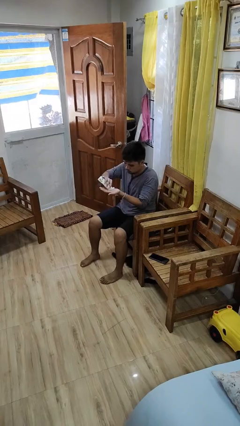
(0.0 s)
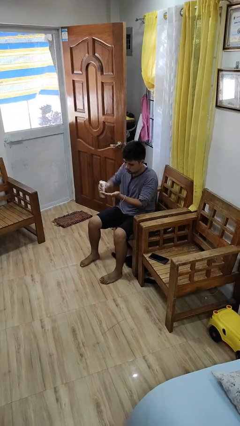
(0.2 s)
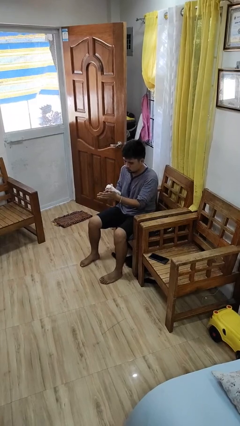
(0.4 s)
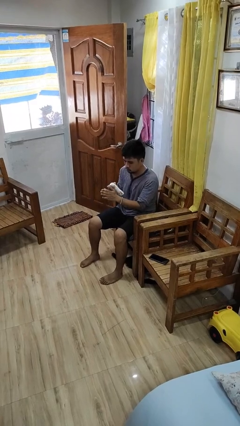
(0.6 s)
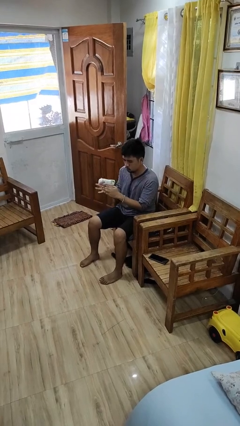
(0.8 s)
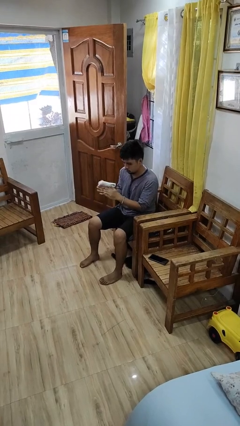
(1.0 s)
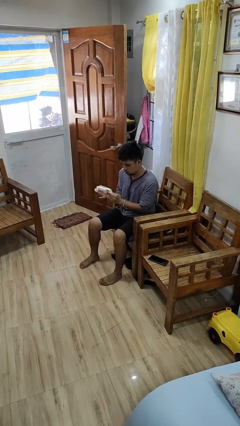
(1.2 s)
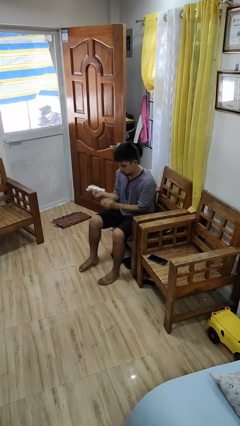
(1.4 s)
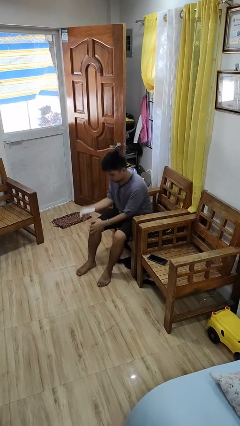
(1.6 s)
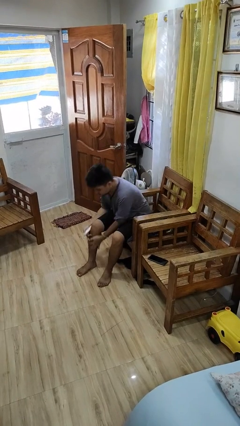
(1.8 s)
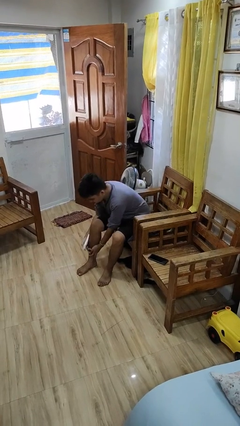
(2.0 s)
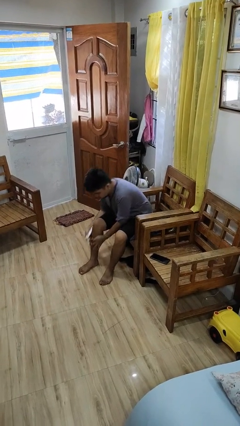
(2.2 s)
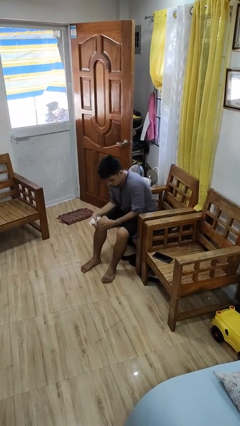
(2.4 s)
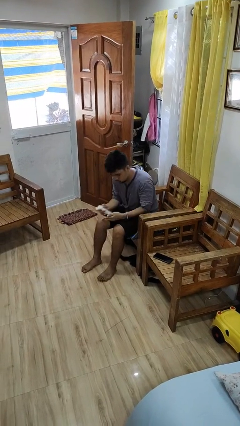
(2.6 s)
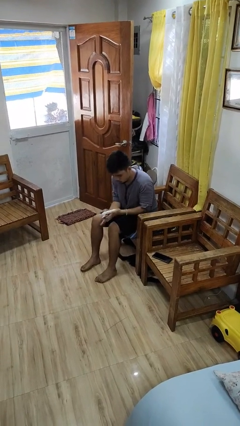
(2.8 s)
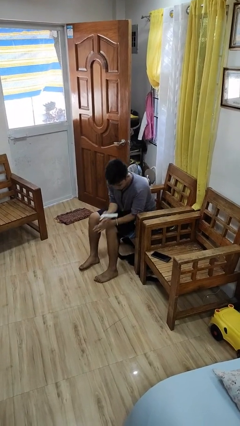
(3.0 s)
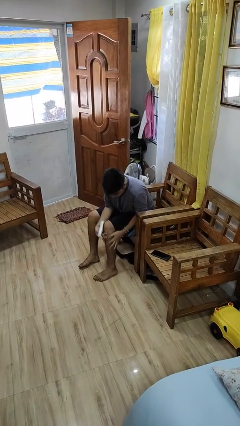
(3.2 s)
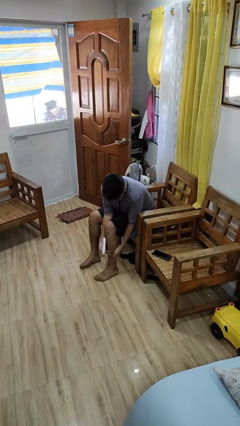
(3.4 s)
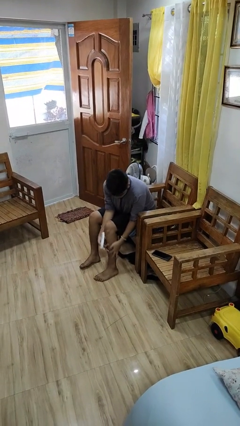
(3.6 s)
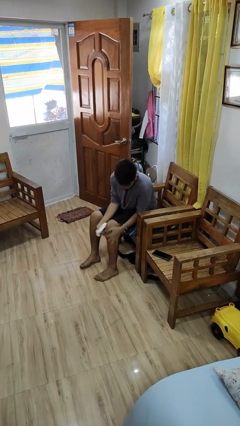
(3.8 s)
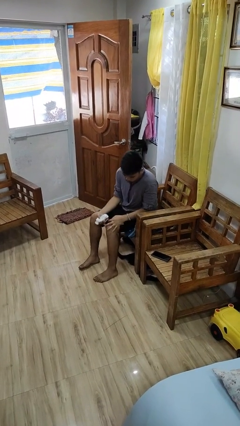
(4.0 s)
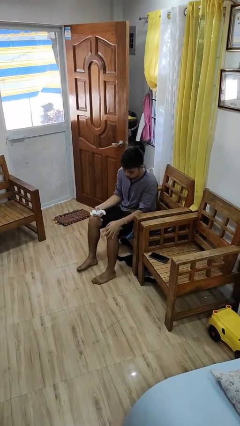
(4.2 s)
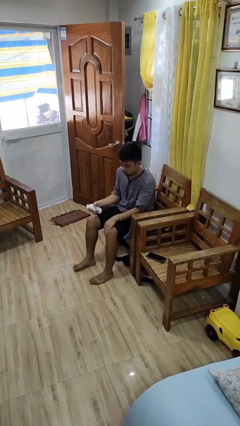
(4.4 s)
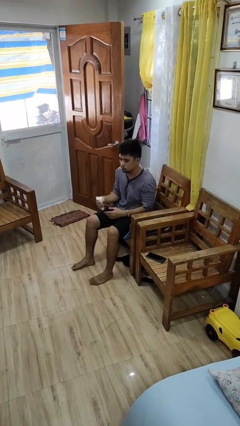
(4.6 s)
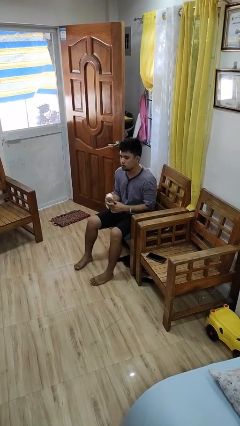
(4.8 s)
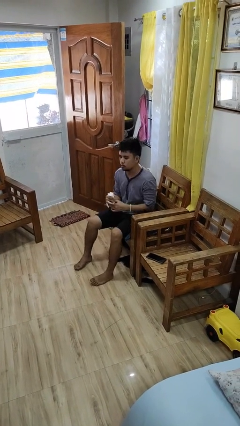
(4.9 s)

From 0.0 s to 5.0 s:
person applies sunscreen

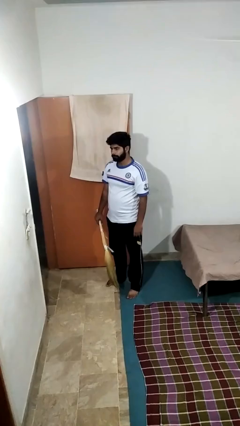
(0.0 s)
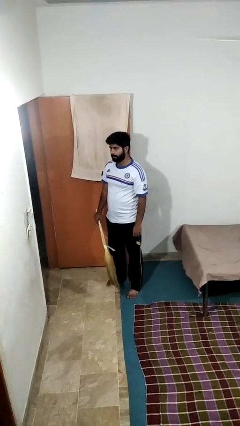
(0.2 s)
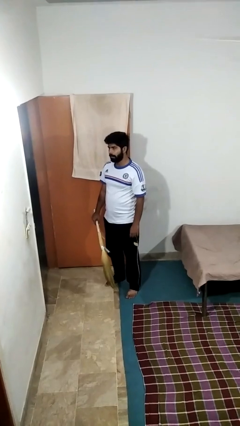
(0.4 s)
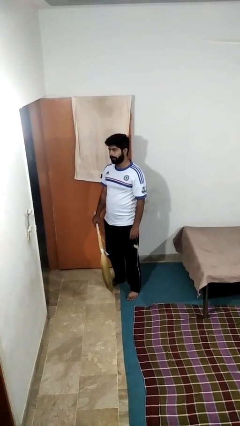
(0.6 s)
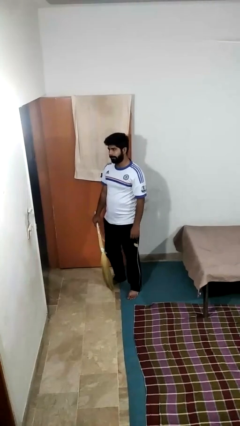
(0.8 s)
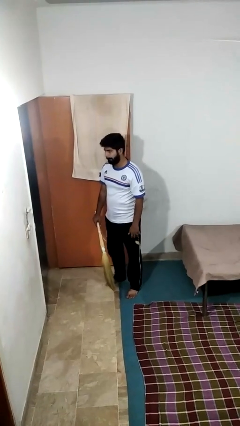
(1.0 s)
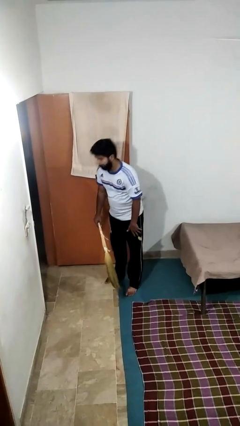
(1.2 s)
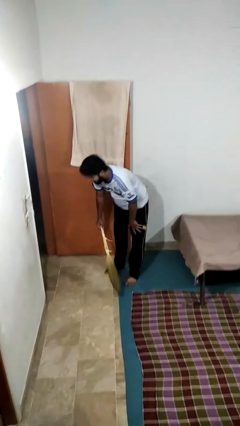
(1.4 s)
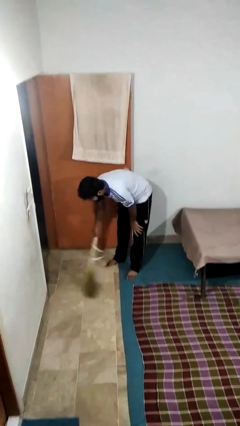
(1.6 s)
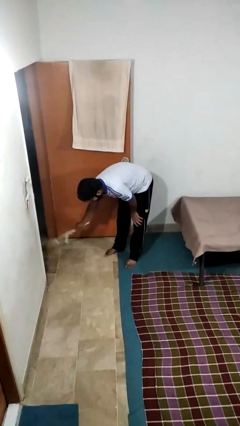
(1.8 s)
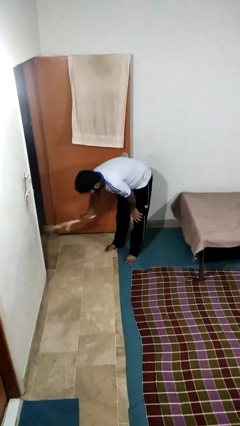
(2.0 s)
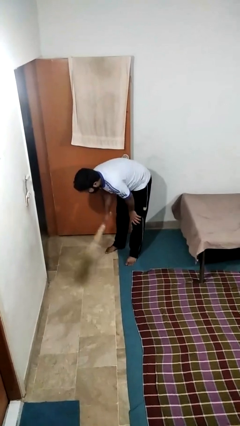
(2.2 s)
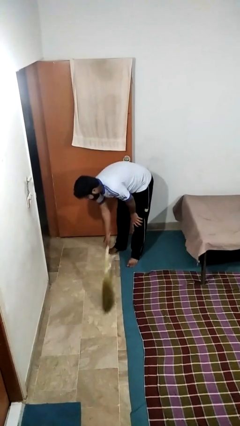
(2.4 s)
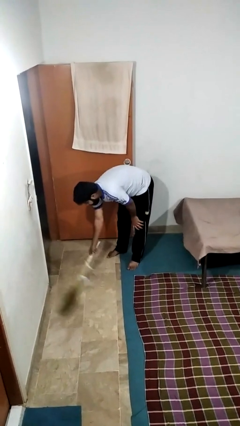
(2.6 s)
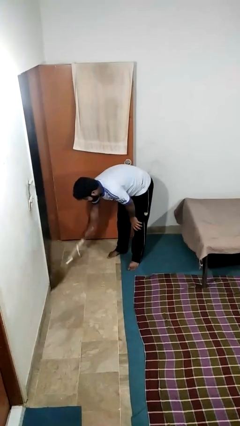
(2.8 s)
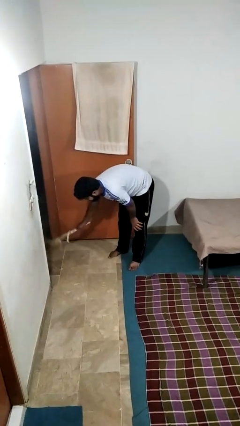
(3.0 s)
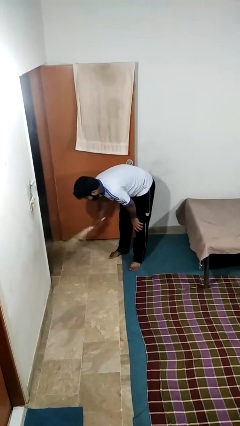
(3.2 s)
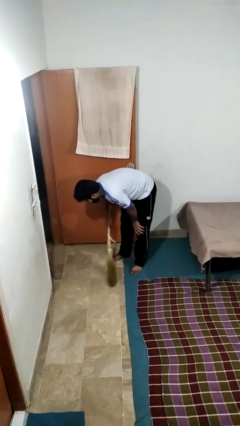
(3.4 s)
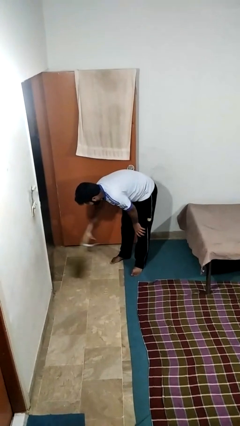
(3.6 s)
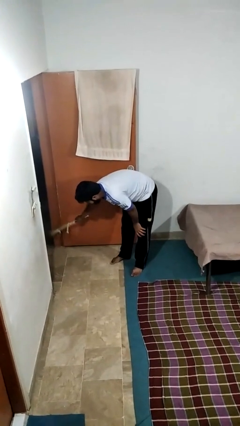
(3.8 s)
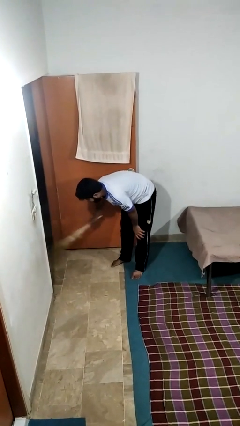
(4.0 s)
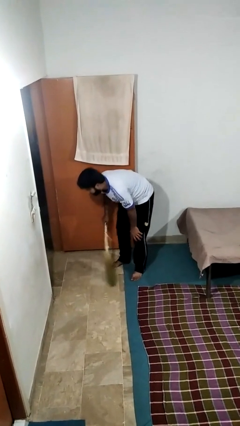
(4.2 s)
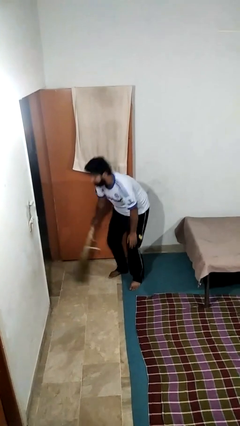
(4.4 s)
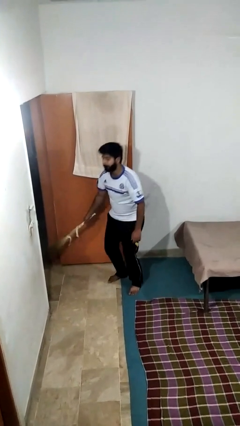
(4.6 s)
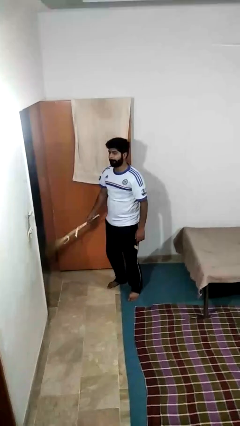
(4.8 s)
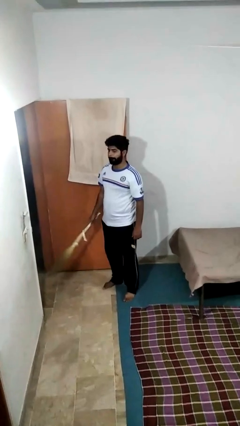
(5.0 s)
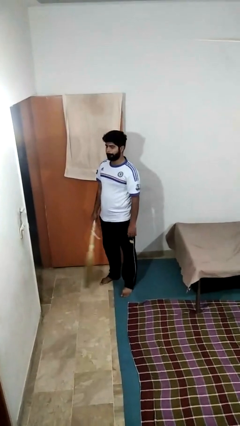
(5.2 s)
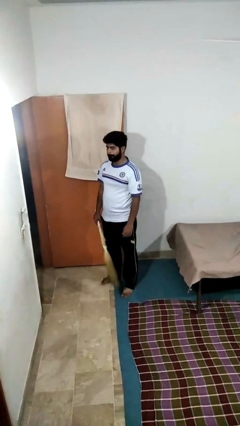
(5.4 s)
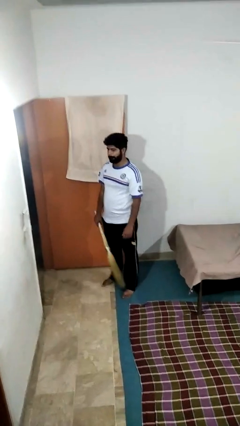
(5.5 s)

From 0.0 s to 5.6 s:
person sweeps floor

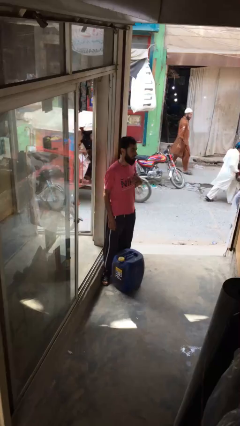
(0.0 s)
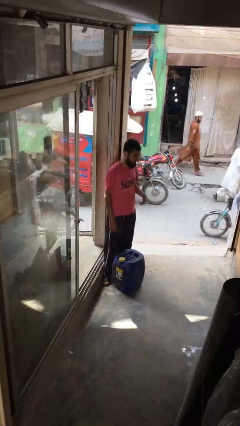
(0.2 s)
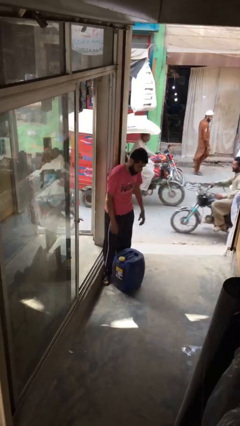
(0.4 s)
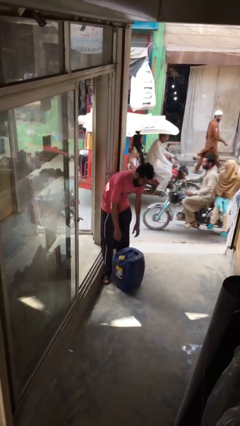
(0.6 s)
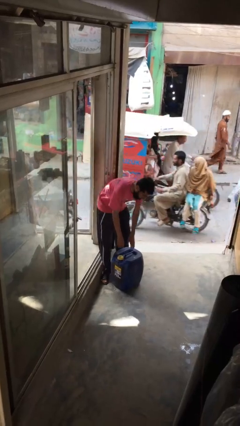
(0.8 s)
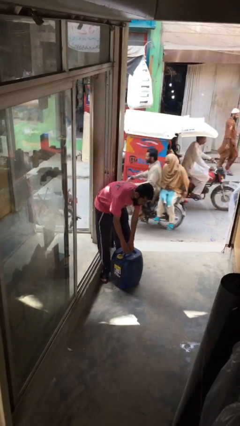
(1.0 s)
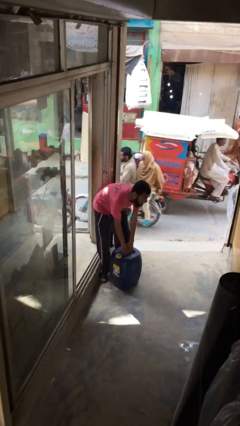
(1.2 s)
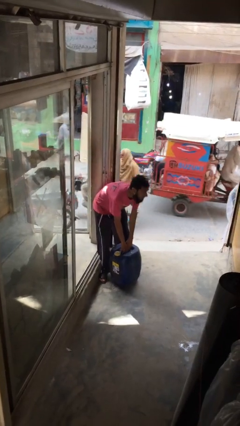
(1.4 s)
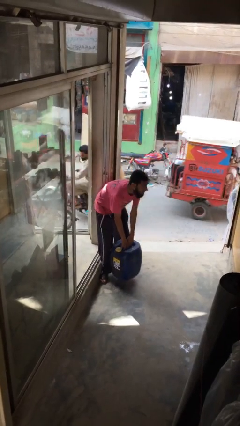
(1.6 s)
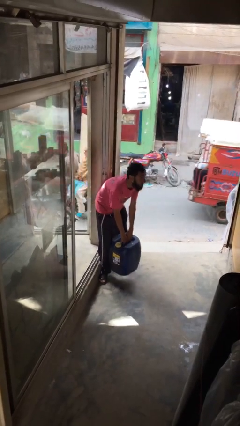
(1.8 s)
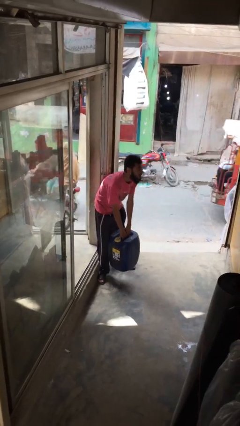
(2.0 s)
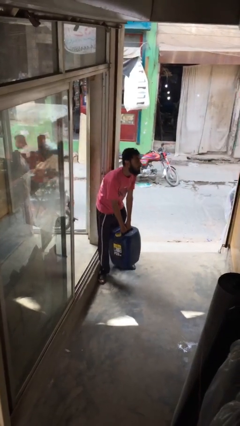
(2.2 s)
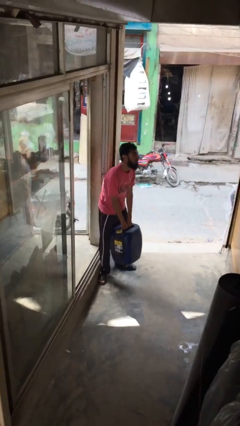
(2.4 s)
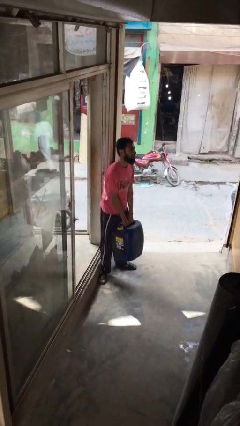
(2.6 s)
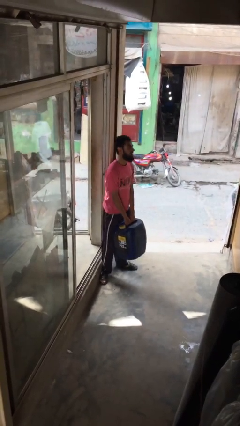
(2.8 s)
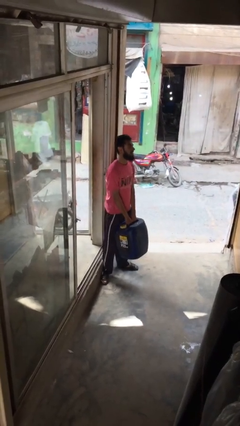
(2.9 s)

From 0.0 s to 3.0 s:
person picks up object from floor

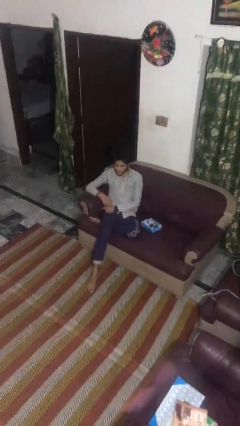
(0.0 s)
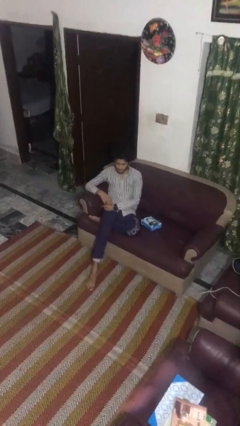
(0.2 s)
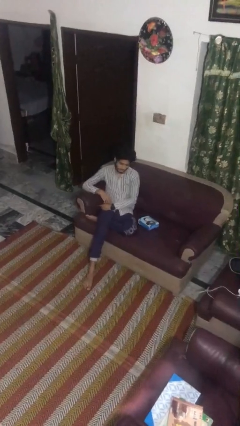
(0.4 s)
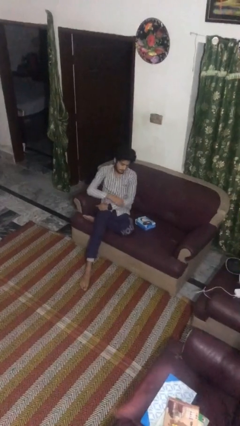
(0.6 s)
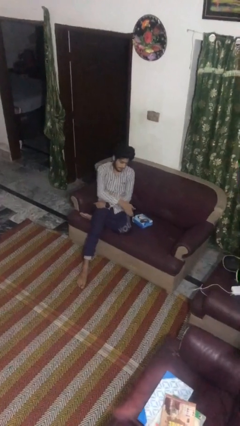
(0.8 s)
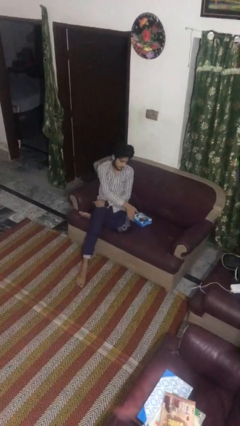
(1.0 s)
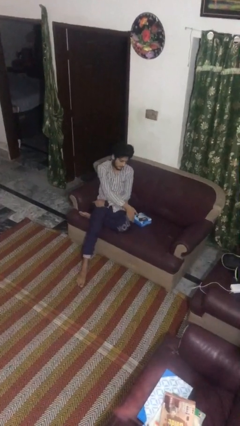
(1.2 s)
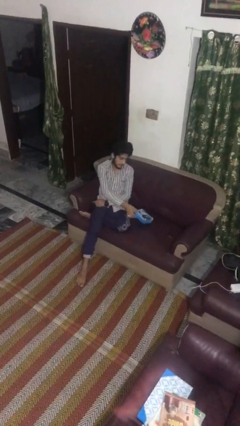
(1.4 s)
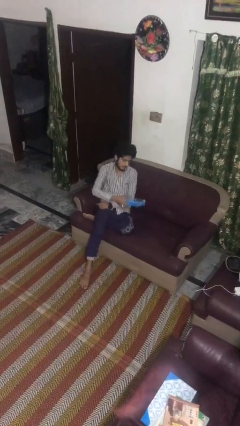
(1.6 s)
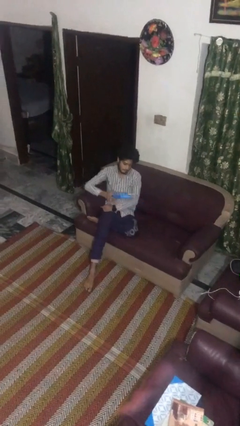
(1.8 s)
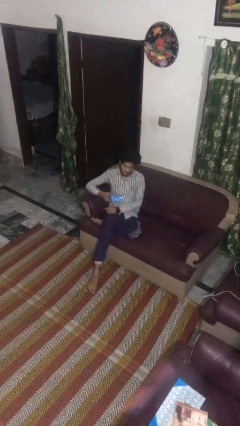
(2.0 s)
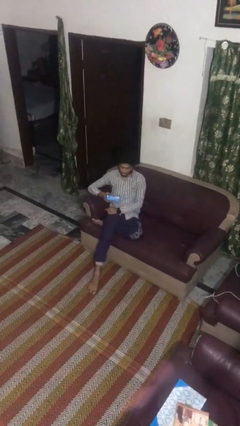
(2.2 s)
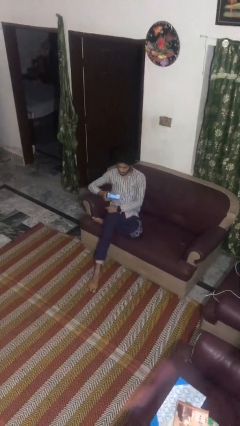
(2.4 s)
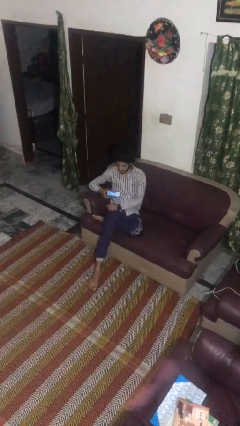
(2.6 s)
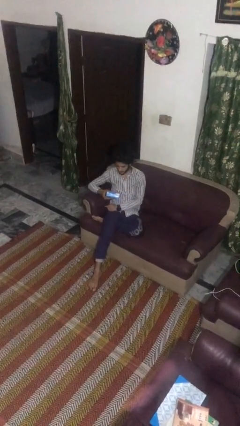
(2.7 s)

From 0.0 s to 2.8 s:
person picks up object from couch

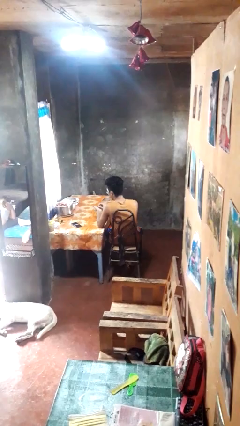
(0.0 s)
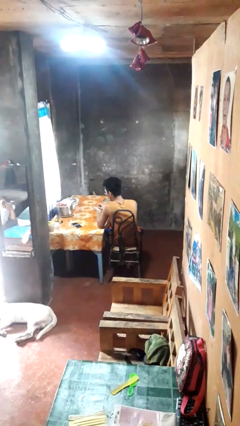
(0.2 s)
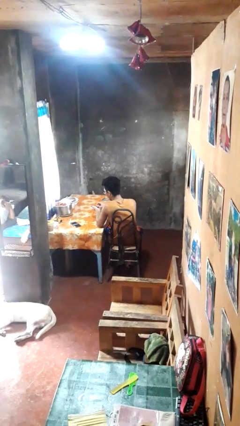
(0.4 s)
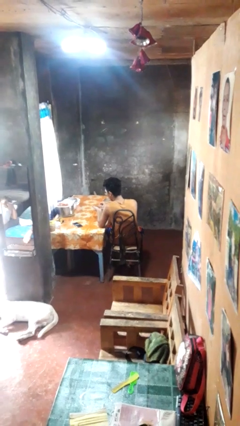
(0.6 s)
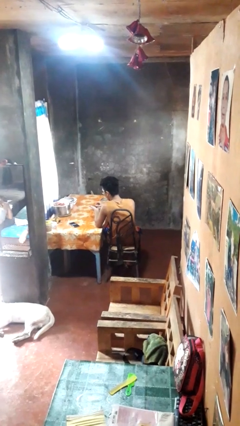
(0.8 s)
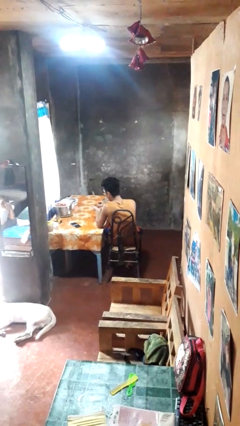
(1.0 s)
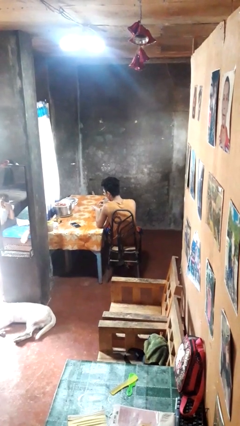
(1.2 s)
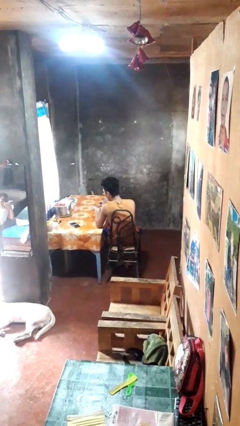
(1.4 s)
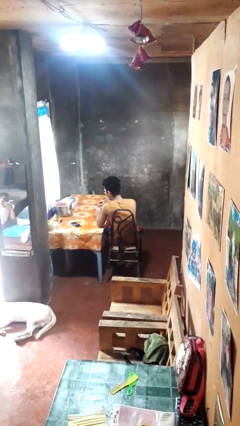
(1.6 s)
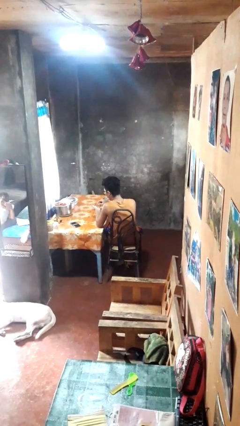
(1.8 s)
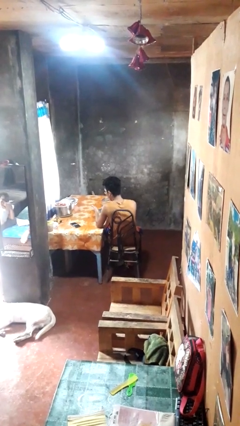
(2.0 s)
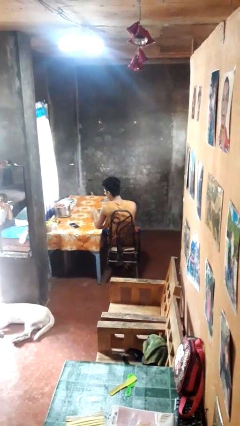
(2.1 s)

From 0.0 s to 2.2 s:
person files fingernails
